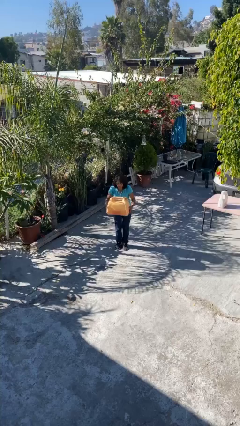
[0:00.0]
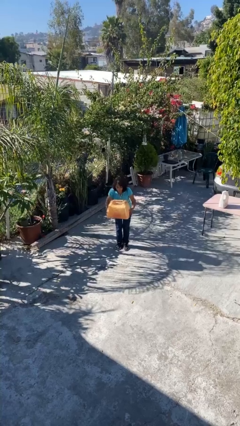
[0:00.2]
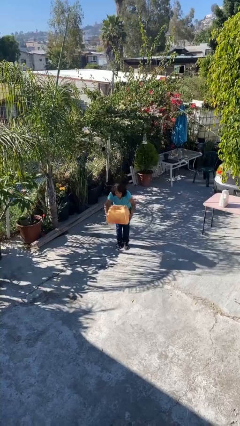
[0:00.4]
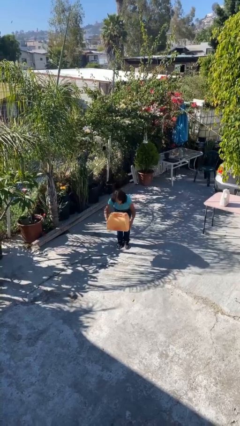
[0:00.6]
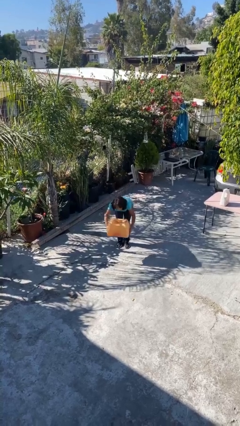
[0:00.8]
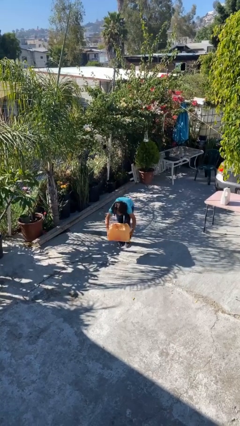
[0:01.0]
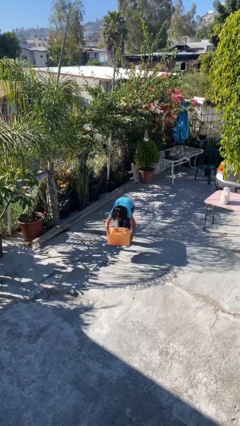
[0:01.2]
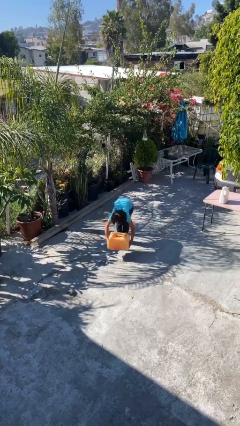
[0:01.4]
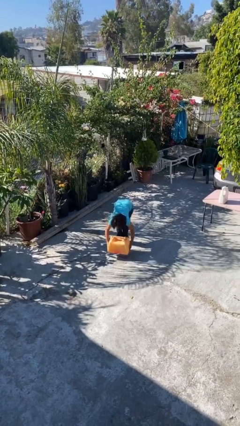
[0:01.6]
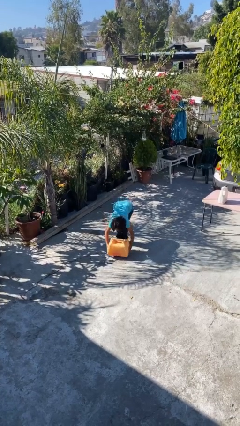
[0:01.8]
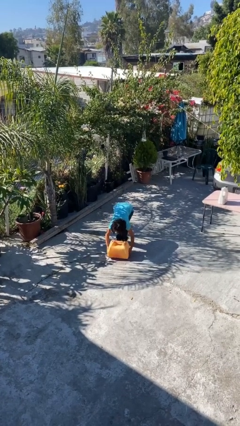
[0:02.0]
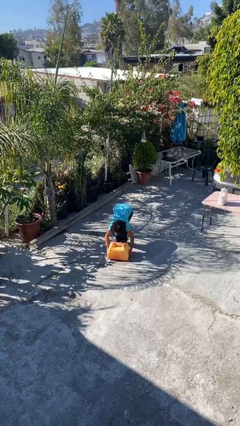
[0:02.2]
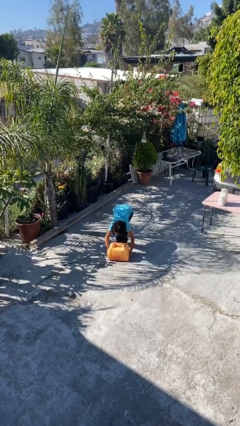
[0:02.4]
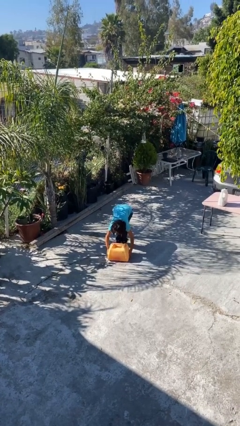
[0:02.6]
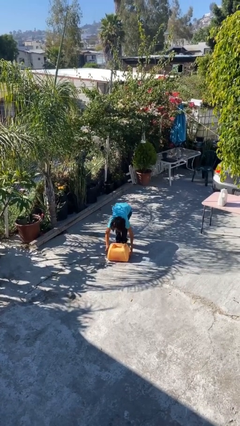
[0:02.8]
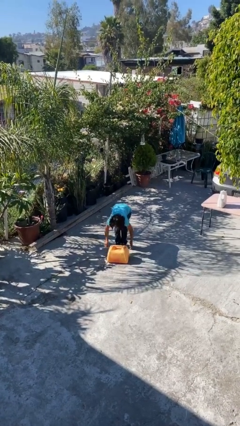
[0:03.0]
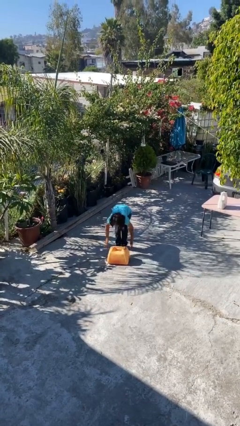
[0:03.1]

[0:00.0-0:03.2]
person puts down object on floor

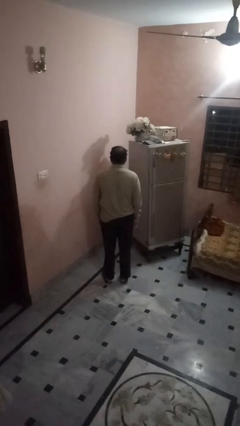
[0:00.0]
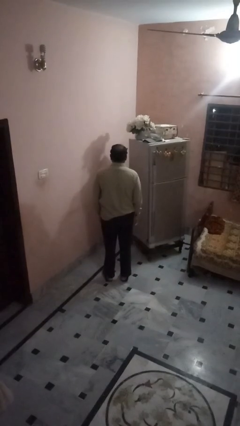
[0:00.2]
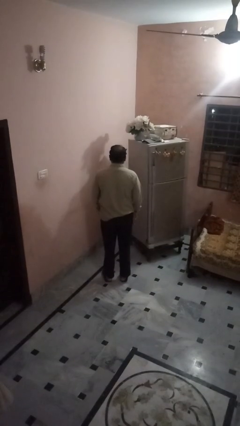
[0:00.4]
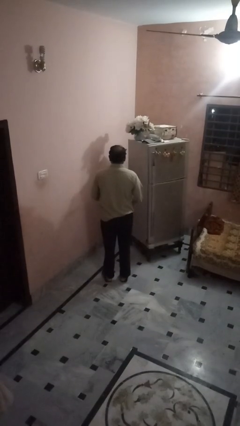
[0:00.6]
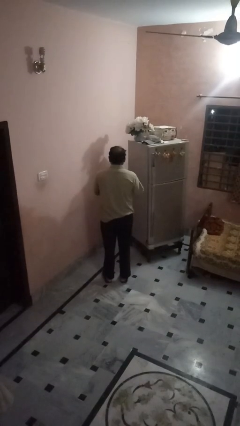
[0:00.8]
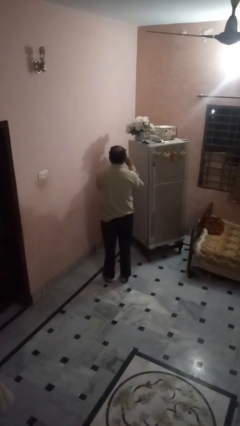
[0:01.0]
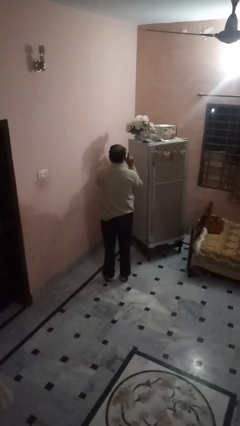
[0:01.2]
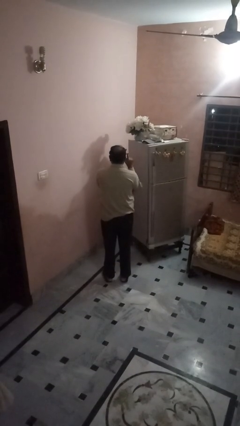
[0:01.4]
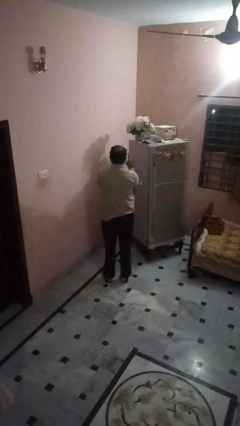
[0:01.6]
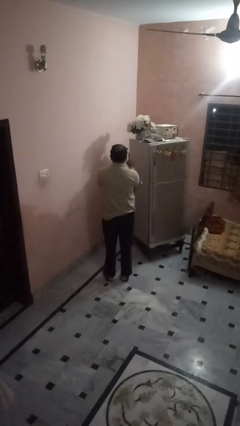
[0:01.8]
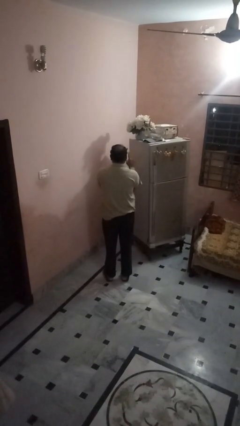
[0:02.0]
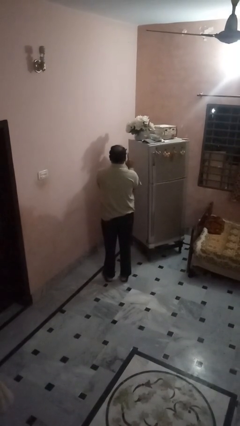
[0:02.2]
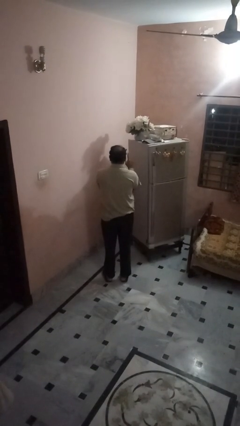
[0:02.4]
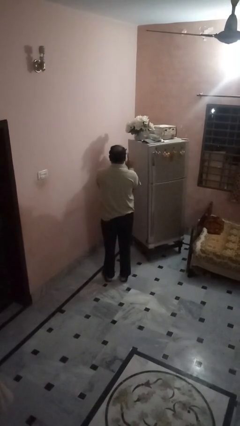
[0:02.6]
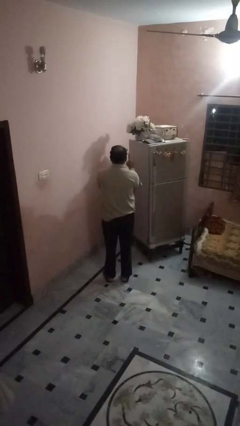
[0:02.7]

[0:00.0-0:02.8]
person gestures number one

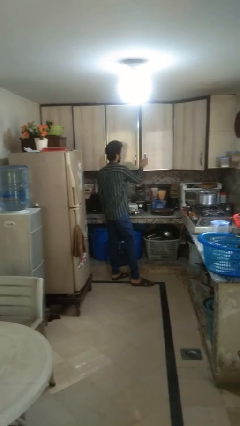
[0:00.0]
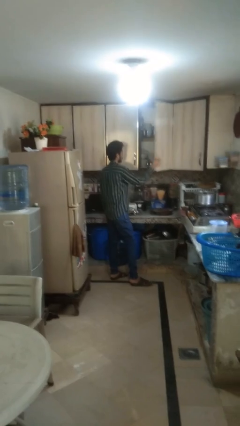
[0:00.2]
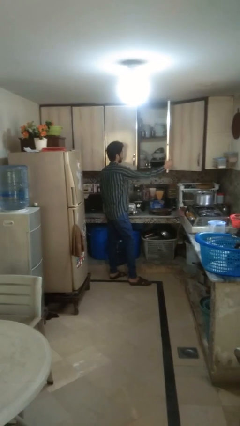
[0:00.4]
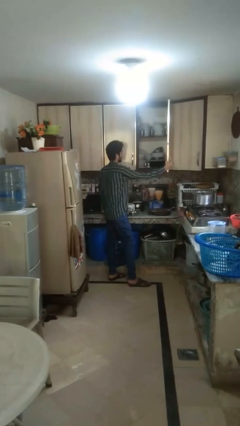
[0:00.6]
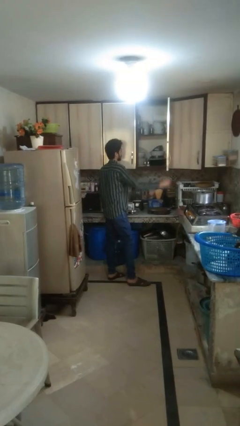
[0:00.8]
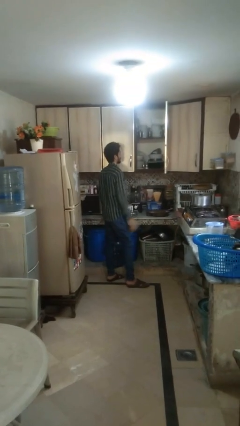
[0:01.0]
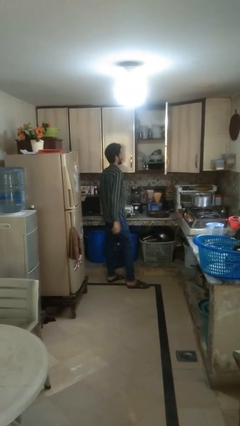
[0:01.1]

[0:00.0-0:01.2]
person opens cabinet

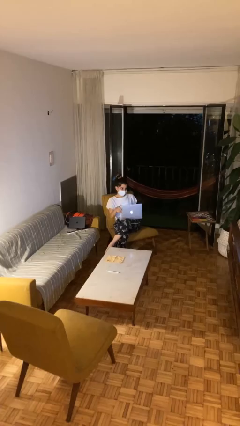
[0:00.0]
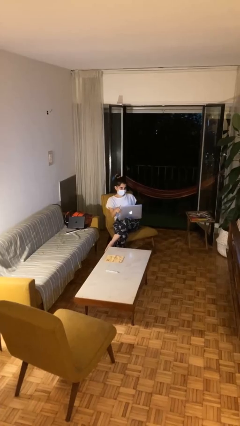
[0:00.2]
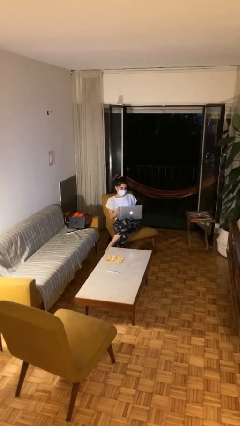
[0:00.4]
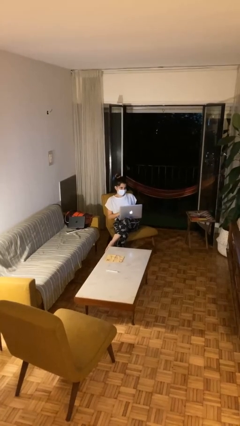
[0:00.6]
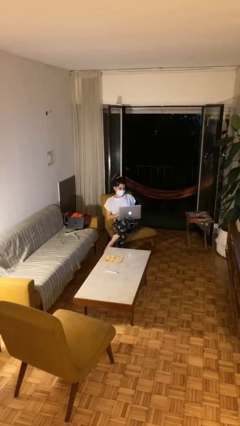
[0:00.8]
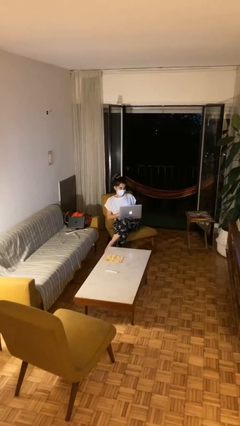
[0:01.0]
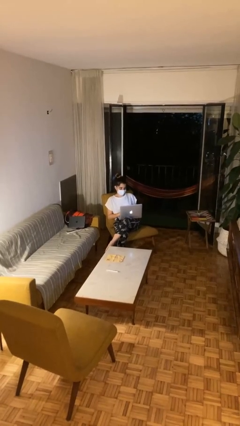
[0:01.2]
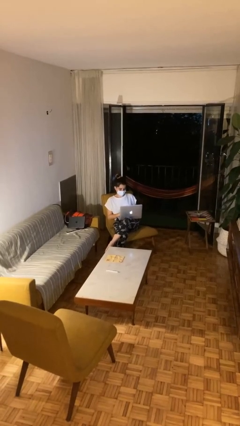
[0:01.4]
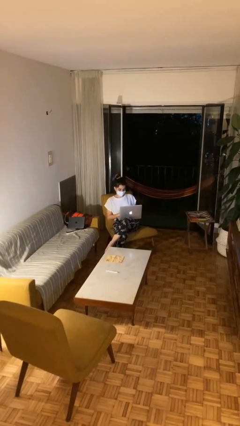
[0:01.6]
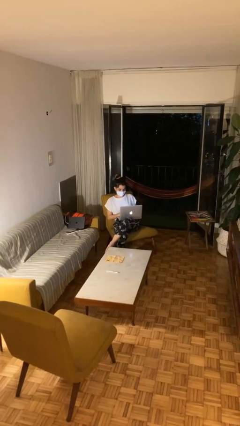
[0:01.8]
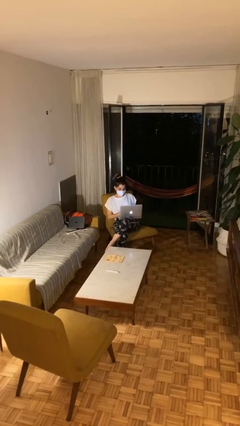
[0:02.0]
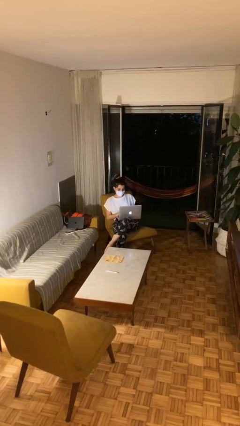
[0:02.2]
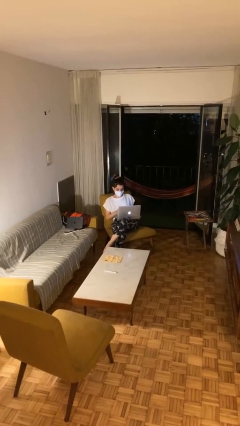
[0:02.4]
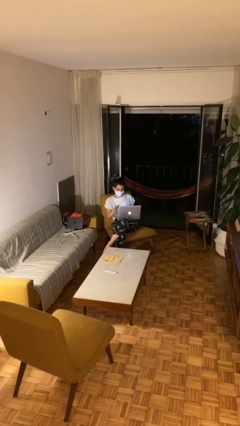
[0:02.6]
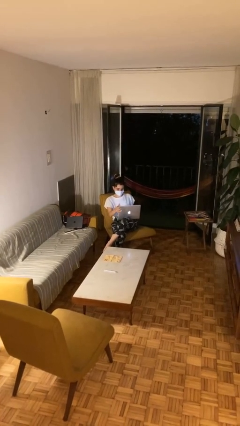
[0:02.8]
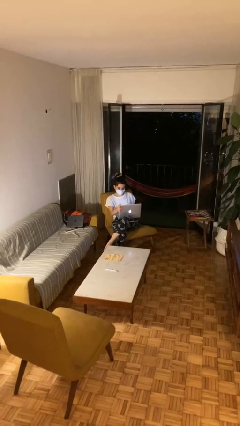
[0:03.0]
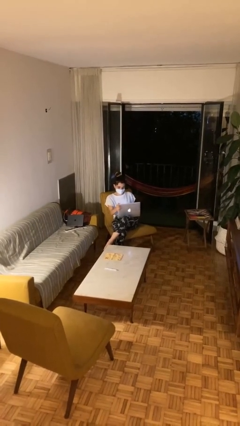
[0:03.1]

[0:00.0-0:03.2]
person interacts with laptop

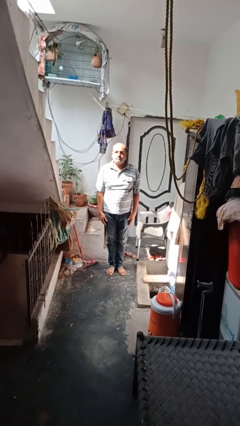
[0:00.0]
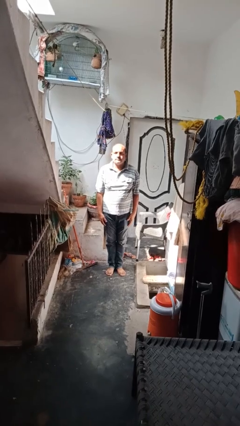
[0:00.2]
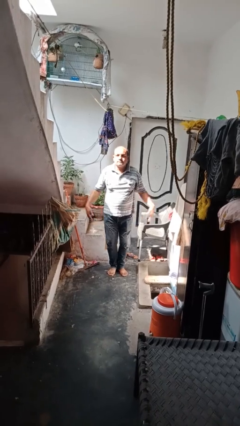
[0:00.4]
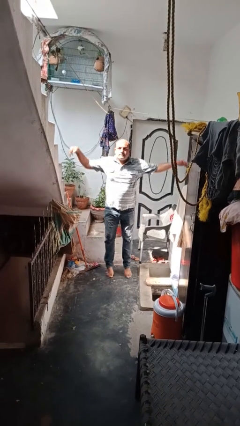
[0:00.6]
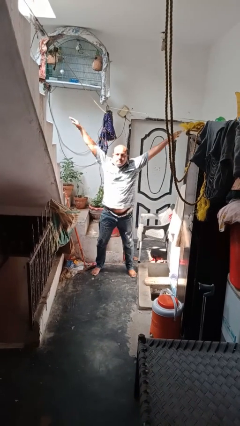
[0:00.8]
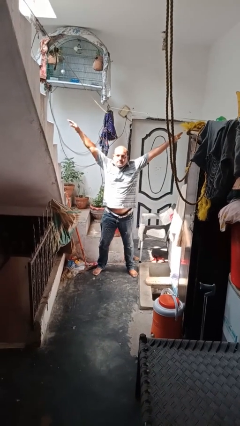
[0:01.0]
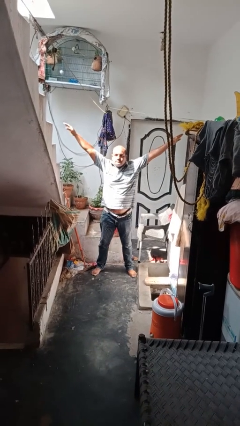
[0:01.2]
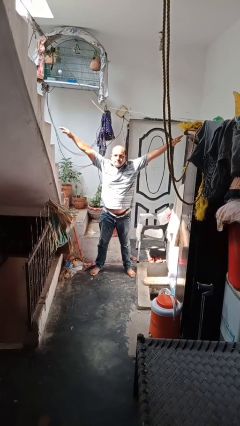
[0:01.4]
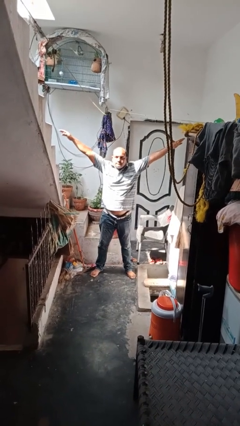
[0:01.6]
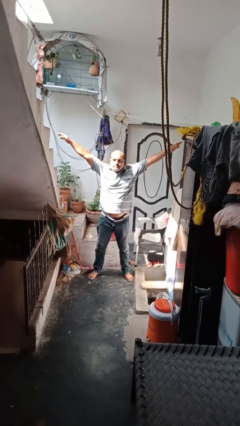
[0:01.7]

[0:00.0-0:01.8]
person exercises with jumping jacks

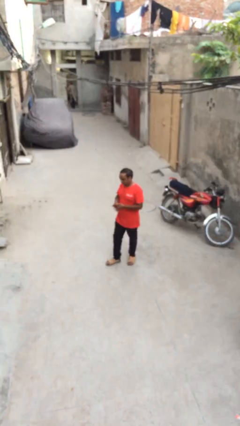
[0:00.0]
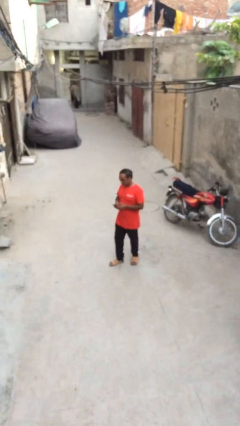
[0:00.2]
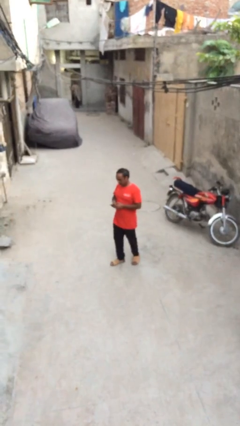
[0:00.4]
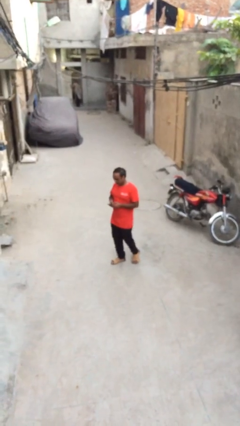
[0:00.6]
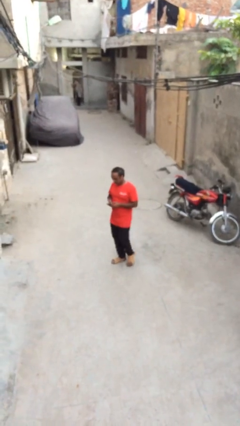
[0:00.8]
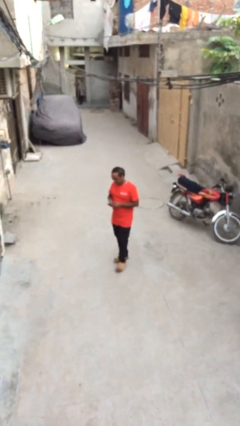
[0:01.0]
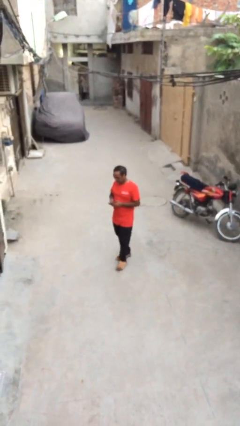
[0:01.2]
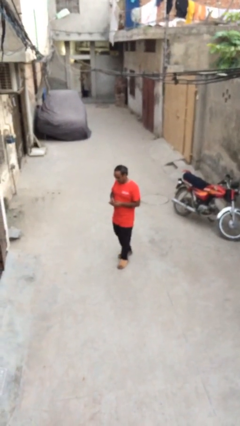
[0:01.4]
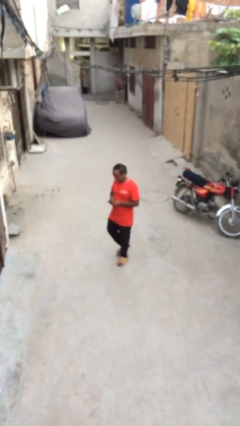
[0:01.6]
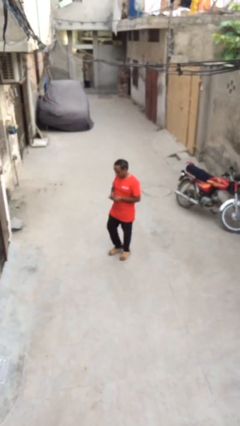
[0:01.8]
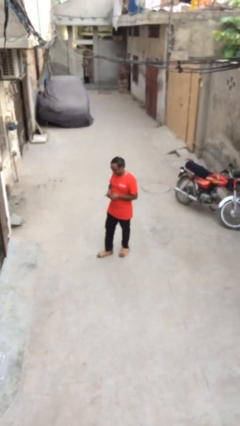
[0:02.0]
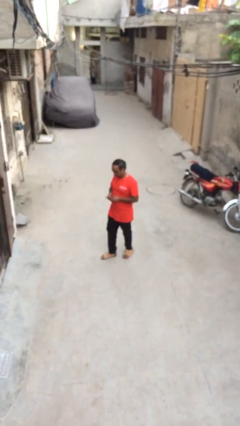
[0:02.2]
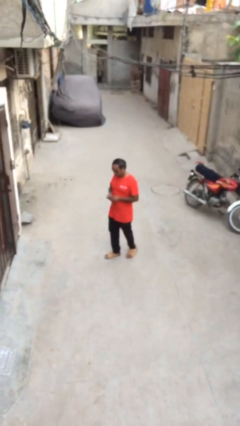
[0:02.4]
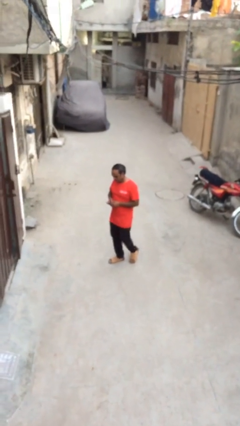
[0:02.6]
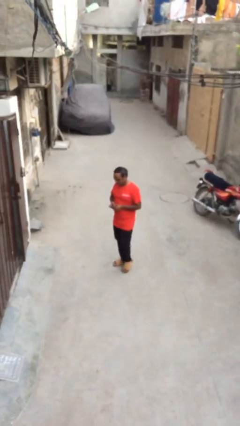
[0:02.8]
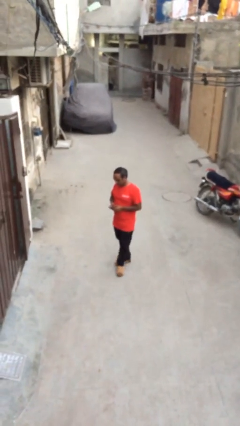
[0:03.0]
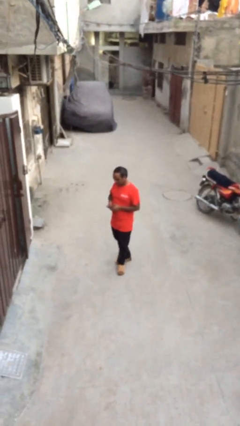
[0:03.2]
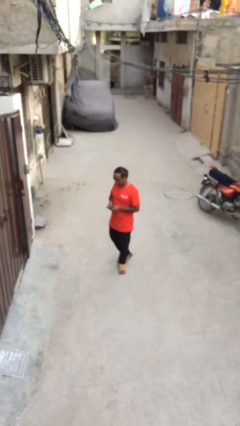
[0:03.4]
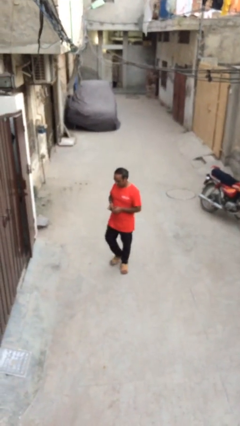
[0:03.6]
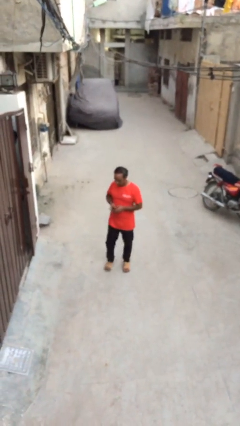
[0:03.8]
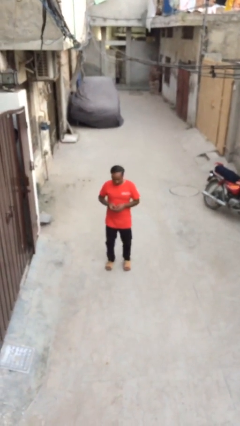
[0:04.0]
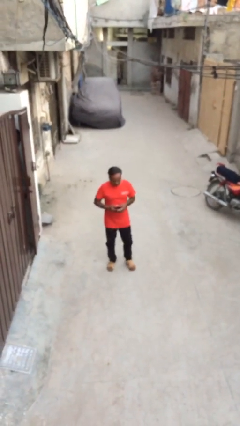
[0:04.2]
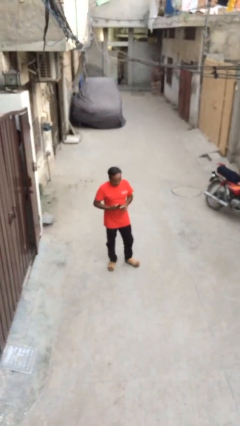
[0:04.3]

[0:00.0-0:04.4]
person texts on phone

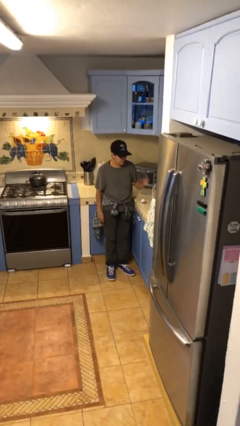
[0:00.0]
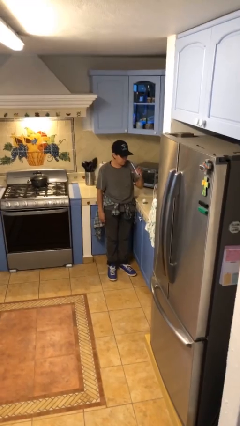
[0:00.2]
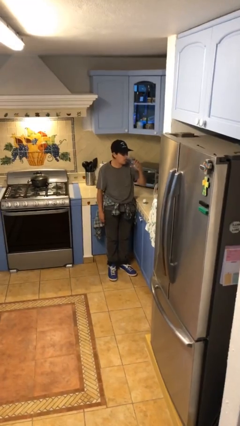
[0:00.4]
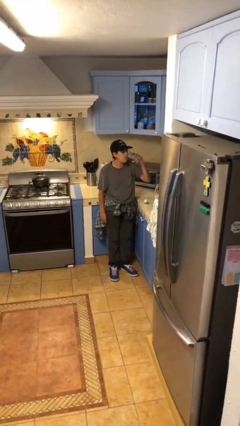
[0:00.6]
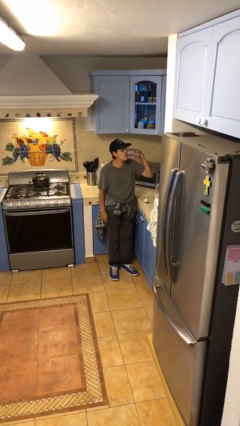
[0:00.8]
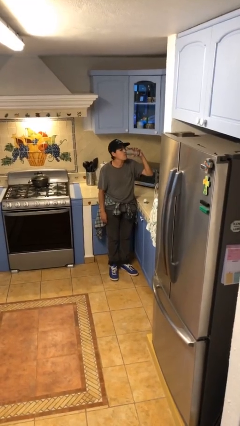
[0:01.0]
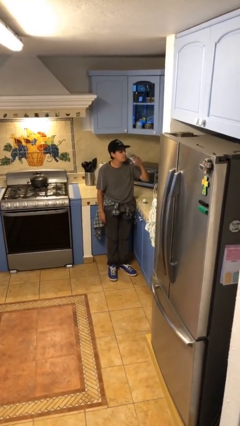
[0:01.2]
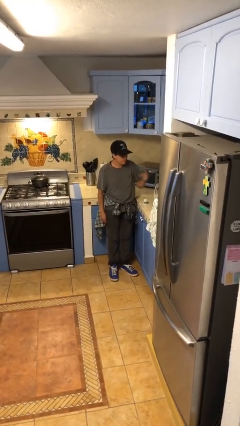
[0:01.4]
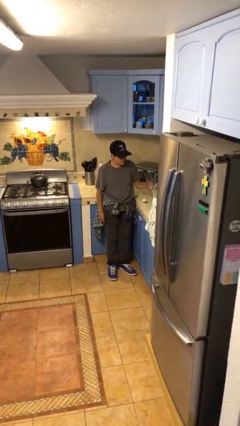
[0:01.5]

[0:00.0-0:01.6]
person drinks from cup
